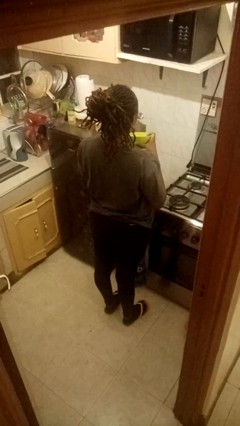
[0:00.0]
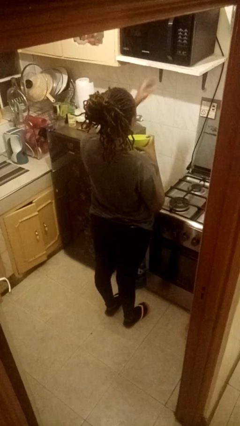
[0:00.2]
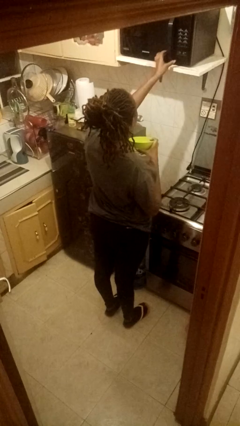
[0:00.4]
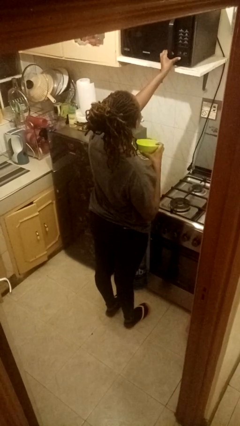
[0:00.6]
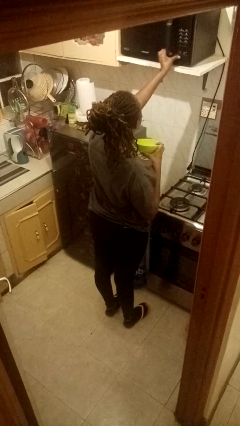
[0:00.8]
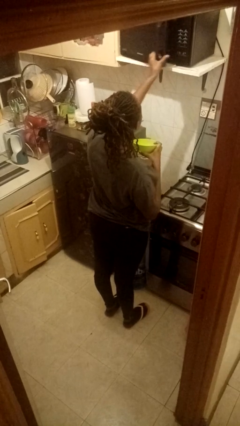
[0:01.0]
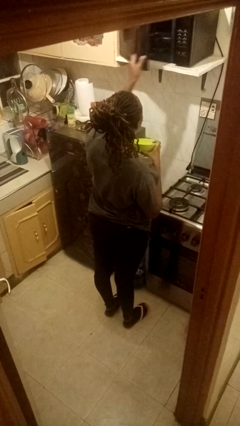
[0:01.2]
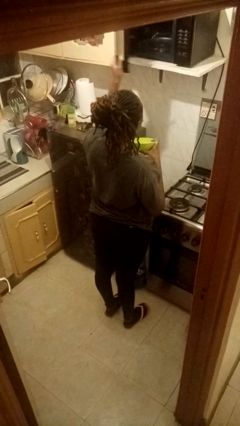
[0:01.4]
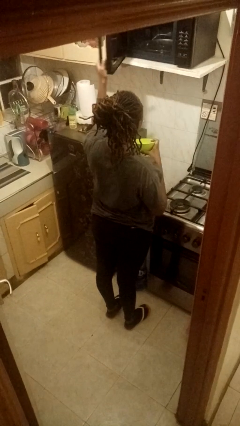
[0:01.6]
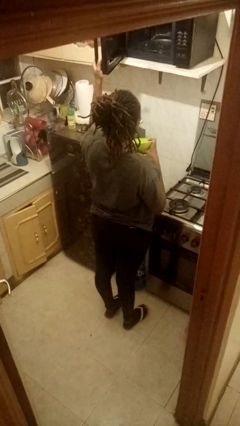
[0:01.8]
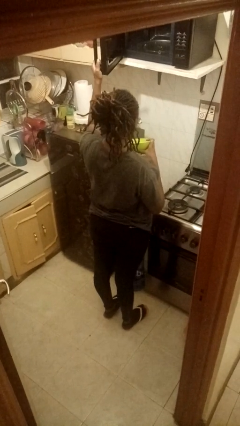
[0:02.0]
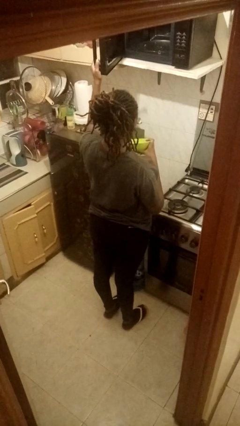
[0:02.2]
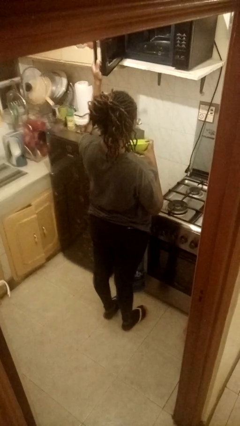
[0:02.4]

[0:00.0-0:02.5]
person opens microwave

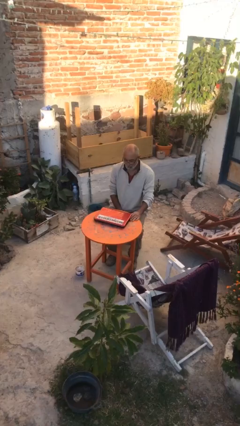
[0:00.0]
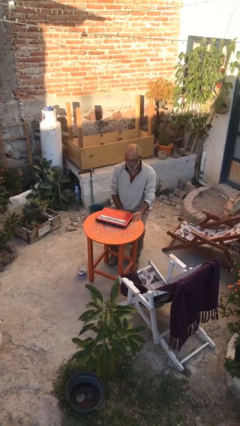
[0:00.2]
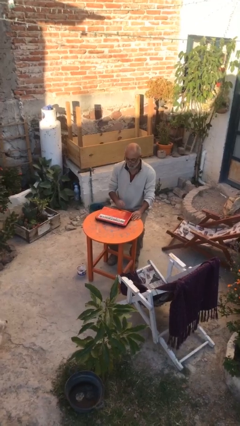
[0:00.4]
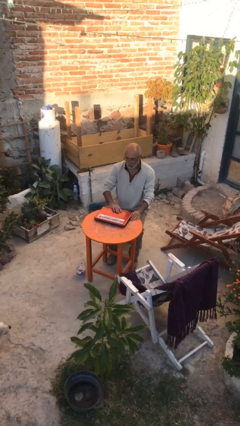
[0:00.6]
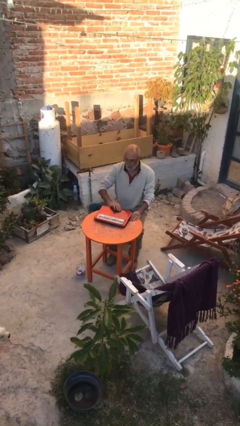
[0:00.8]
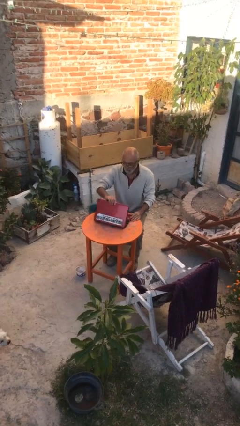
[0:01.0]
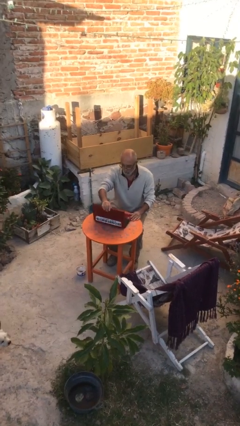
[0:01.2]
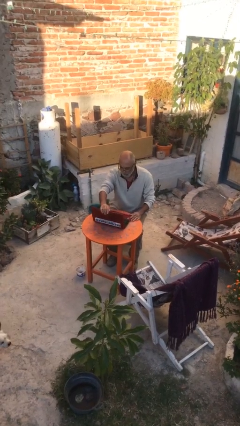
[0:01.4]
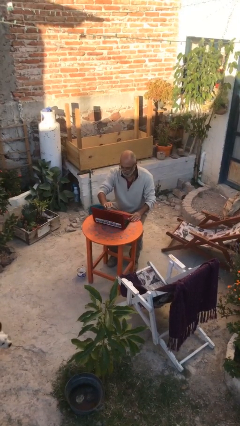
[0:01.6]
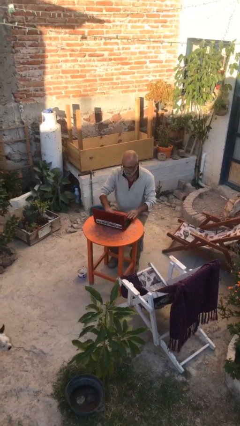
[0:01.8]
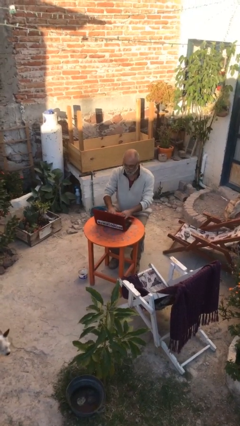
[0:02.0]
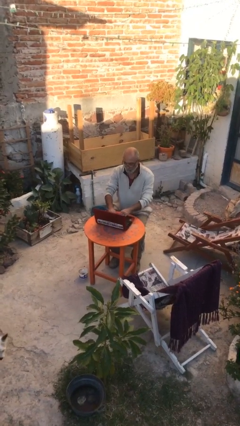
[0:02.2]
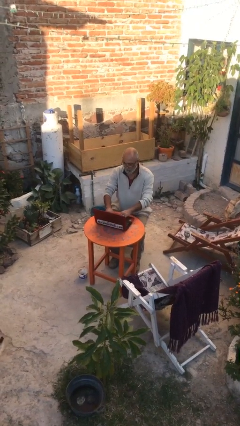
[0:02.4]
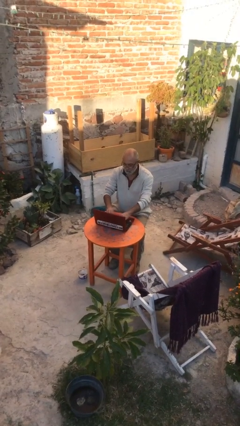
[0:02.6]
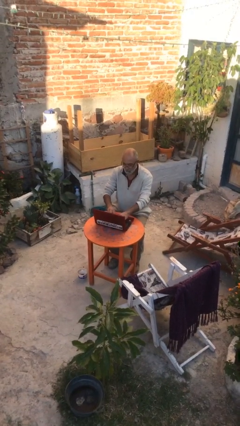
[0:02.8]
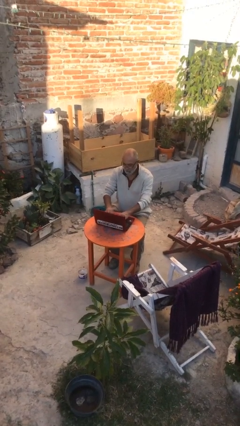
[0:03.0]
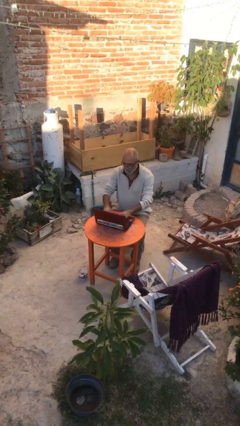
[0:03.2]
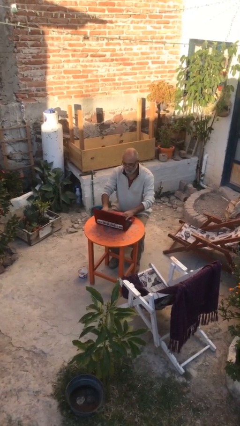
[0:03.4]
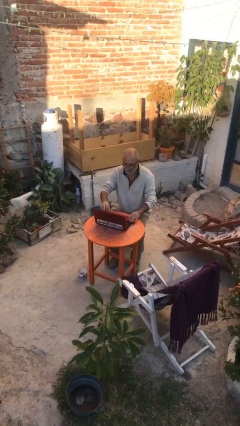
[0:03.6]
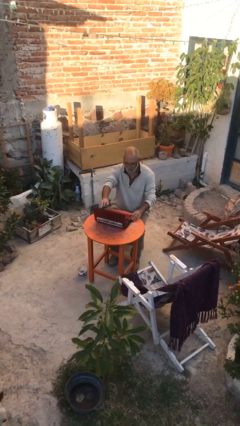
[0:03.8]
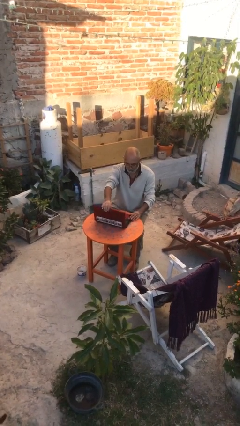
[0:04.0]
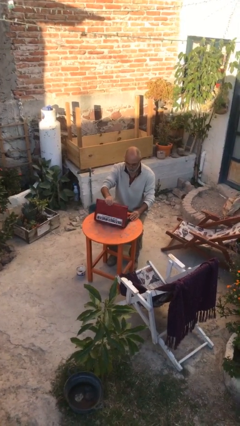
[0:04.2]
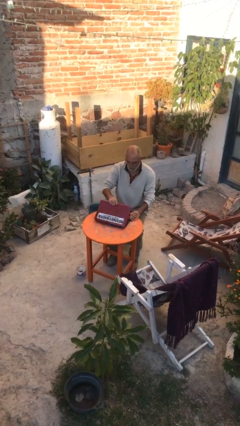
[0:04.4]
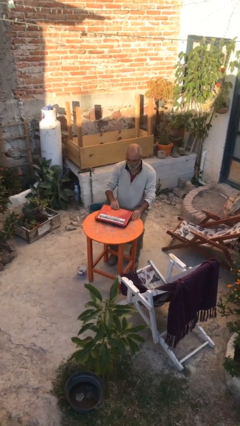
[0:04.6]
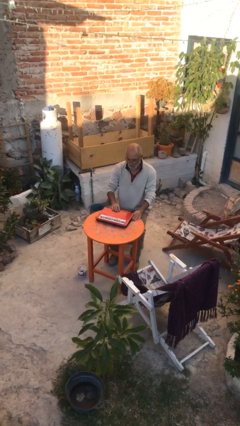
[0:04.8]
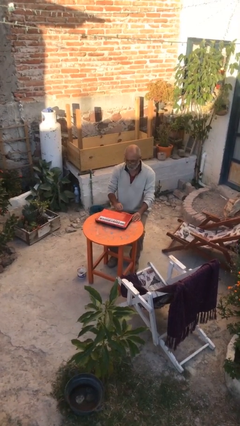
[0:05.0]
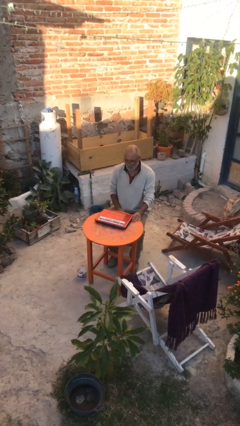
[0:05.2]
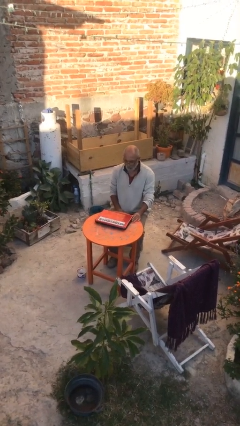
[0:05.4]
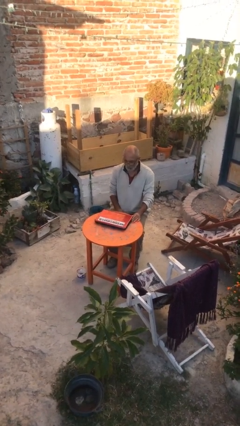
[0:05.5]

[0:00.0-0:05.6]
person interacts with laptop

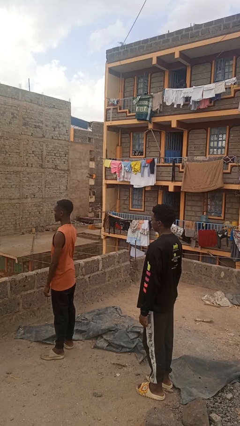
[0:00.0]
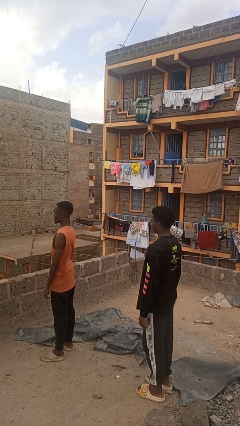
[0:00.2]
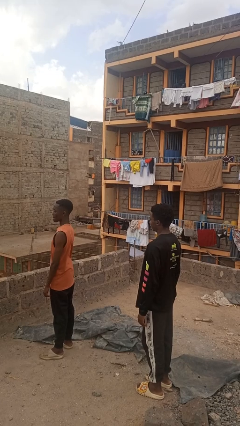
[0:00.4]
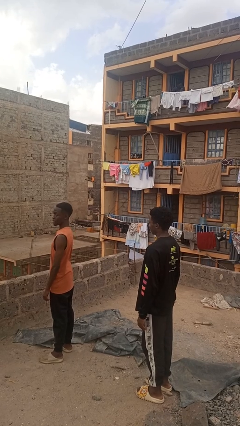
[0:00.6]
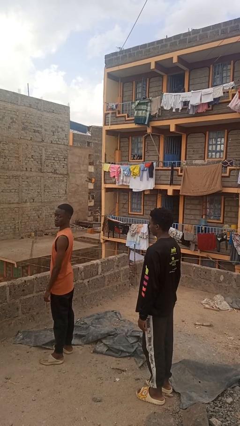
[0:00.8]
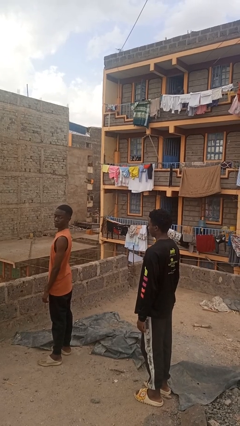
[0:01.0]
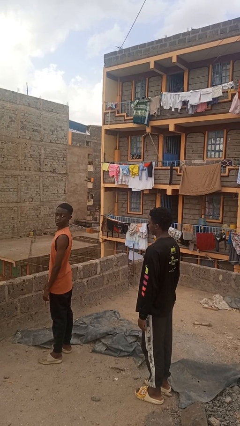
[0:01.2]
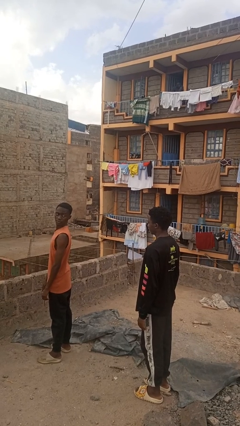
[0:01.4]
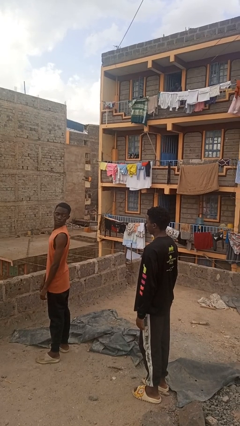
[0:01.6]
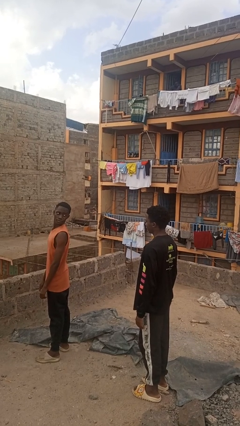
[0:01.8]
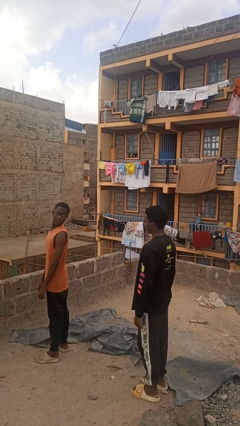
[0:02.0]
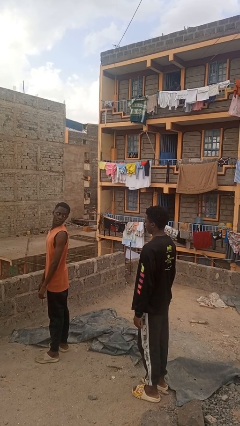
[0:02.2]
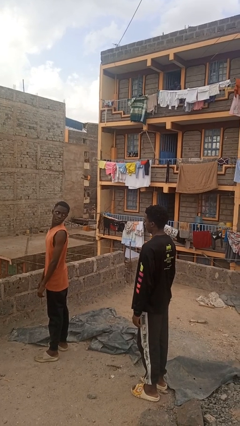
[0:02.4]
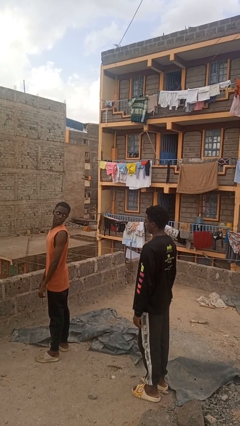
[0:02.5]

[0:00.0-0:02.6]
person looks over shoulder

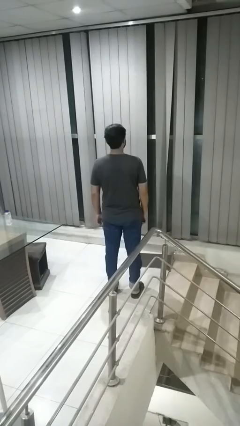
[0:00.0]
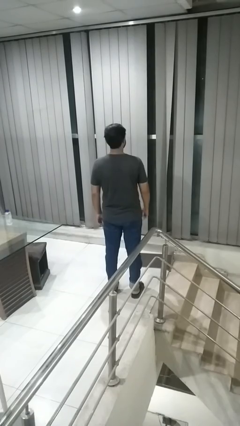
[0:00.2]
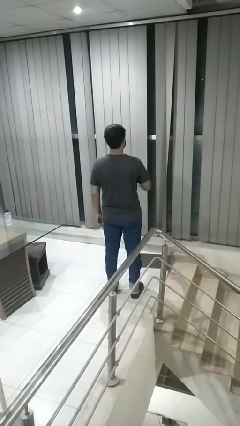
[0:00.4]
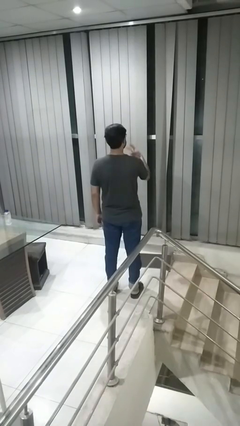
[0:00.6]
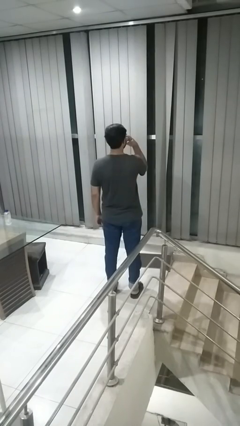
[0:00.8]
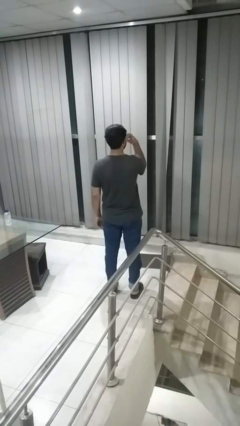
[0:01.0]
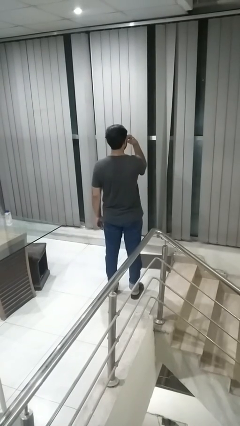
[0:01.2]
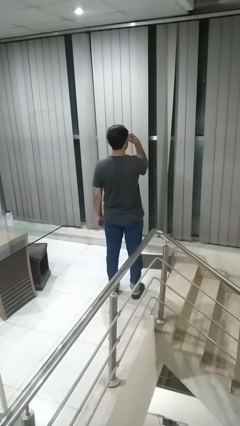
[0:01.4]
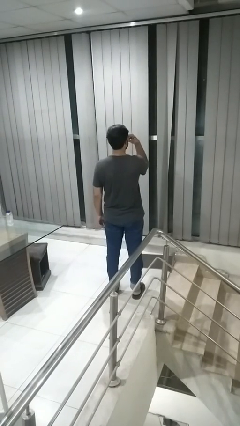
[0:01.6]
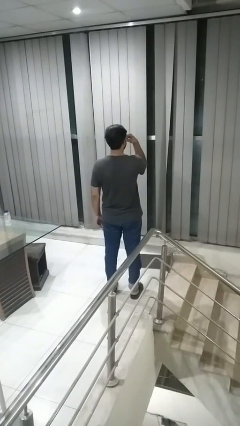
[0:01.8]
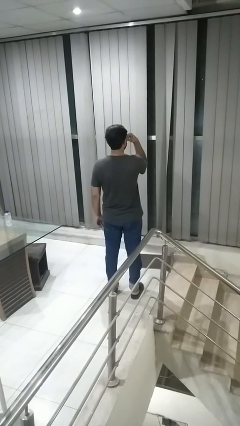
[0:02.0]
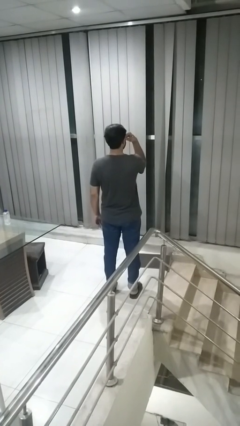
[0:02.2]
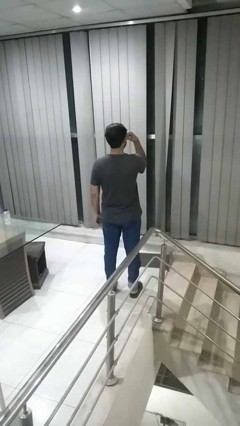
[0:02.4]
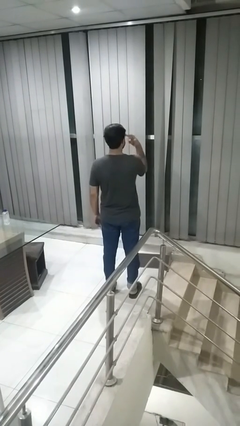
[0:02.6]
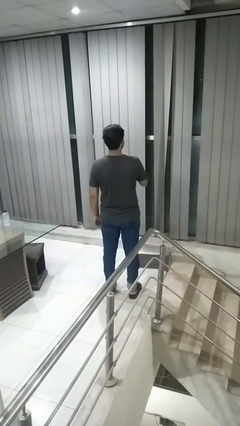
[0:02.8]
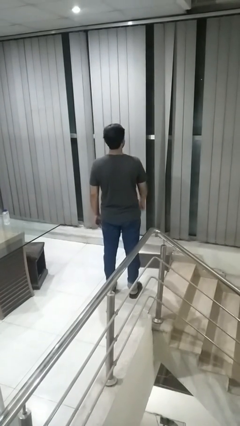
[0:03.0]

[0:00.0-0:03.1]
person gestures watch closely

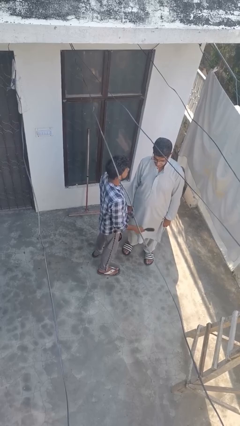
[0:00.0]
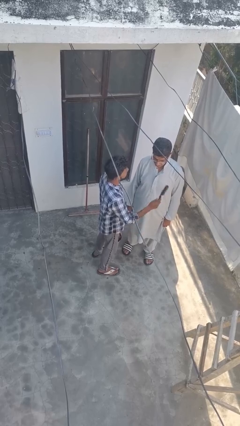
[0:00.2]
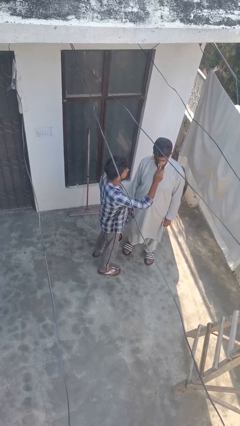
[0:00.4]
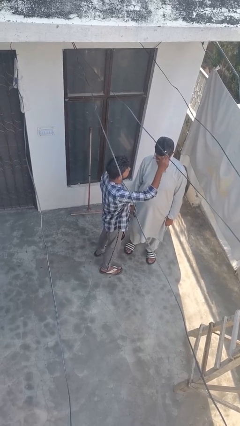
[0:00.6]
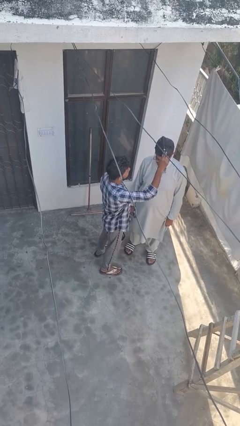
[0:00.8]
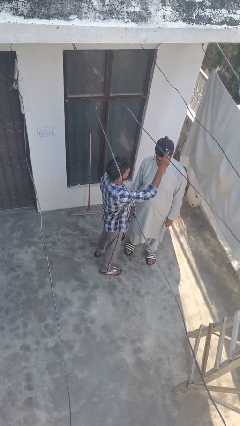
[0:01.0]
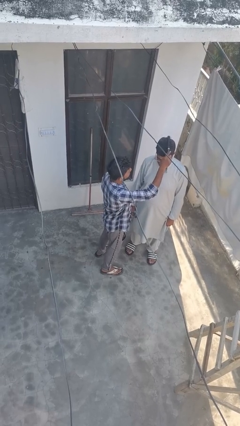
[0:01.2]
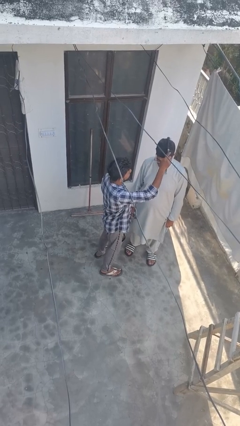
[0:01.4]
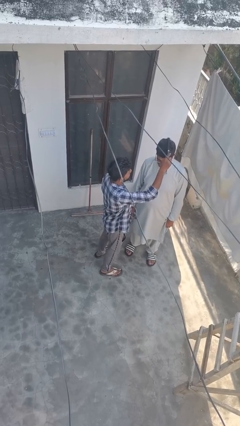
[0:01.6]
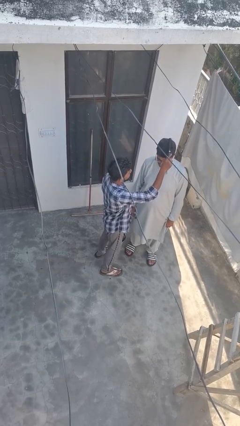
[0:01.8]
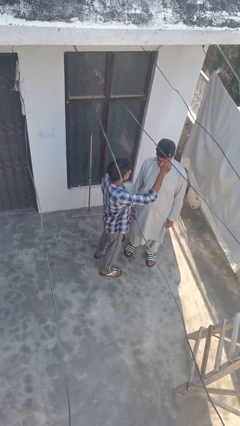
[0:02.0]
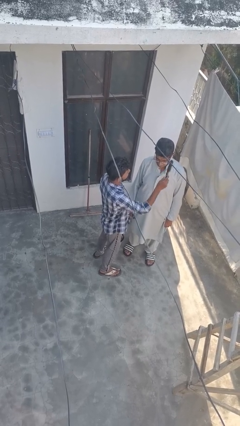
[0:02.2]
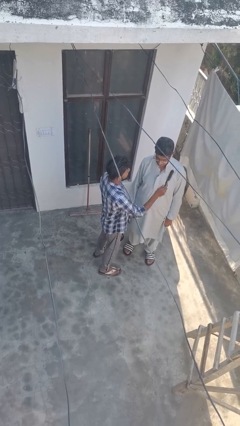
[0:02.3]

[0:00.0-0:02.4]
person brushes hair of person

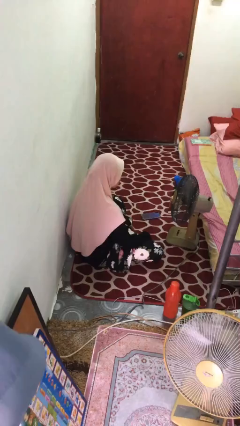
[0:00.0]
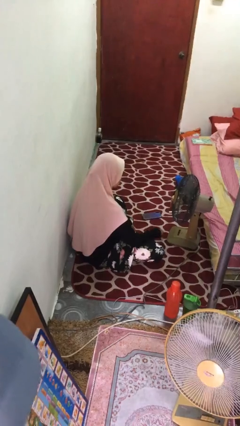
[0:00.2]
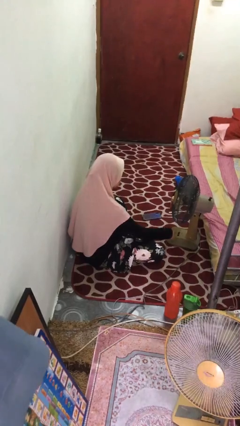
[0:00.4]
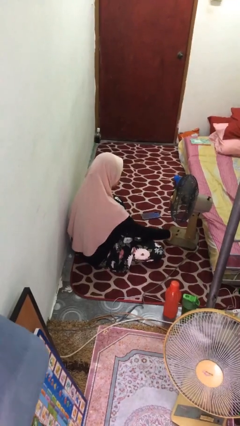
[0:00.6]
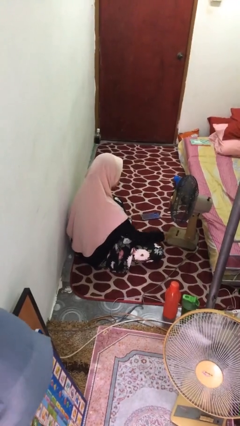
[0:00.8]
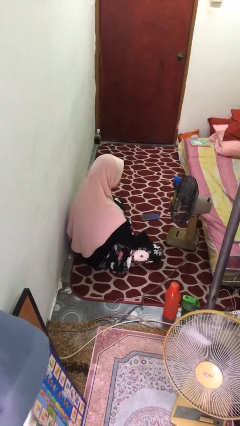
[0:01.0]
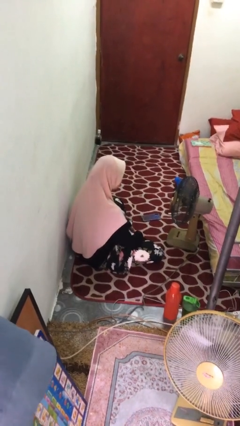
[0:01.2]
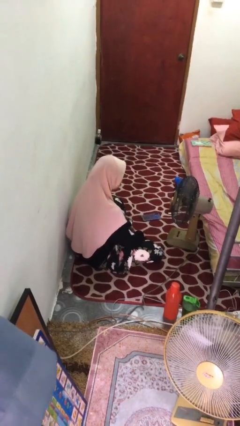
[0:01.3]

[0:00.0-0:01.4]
person turns off fan
